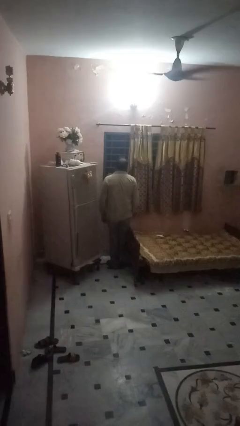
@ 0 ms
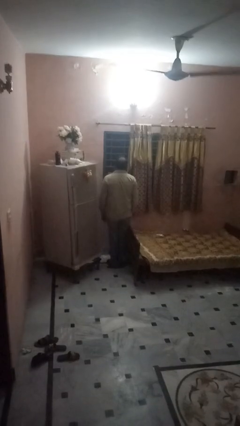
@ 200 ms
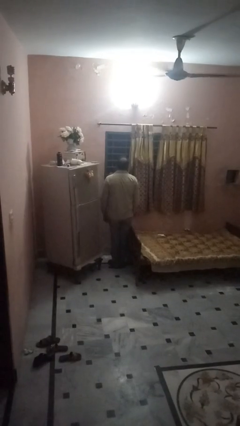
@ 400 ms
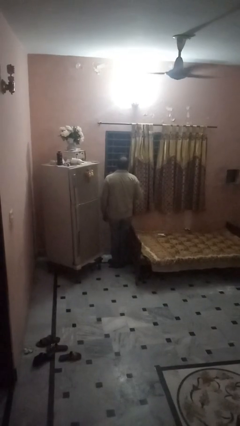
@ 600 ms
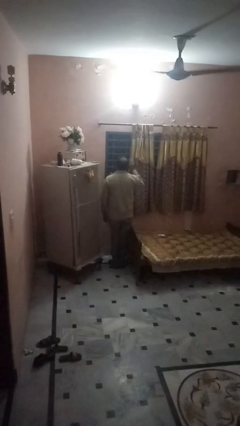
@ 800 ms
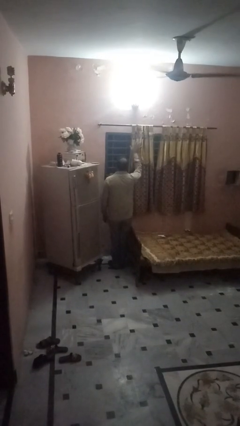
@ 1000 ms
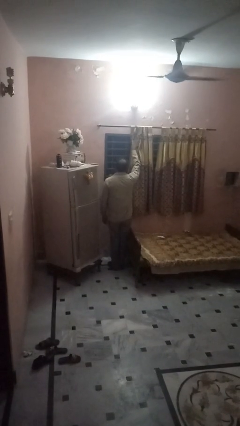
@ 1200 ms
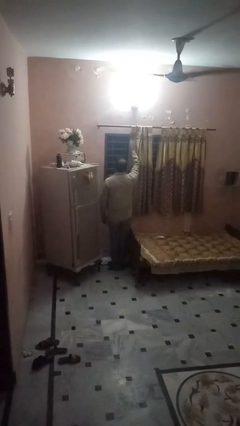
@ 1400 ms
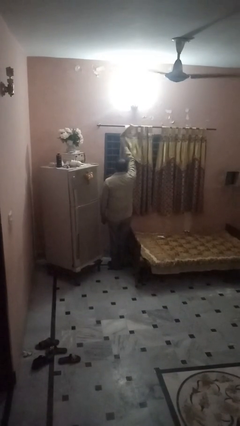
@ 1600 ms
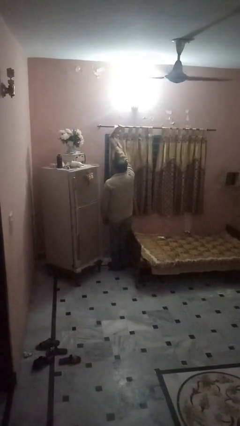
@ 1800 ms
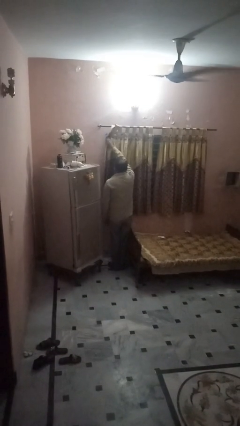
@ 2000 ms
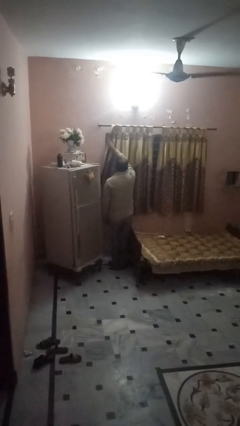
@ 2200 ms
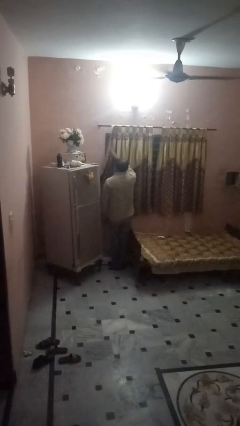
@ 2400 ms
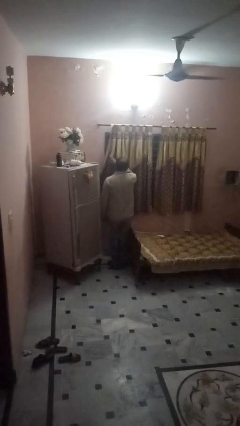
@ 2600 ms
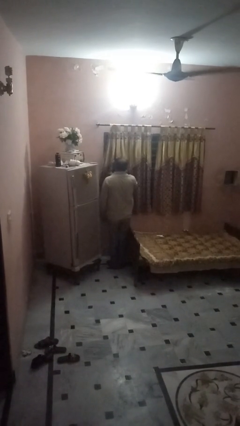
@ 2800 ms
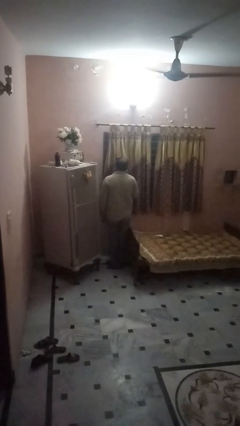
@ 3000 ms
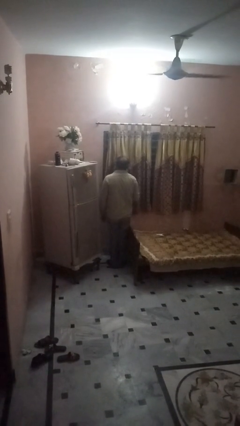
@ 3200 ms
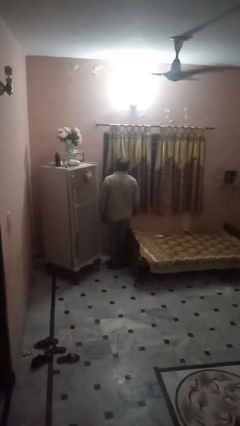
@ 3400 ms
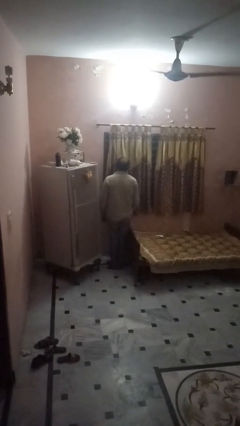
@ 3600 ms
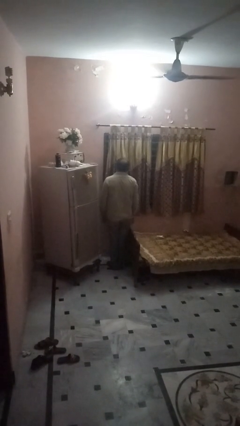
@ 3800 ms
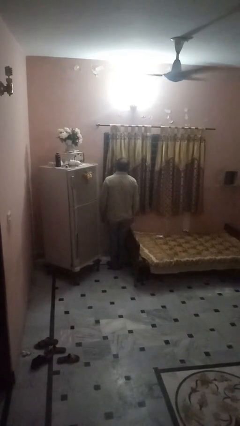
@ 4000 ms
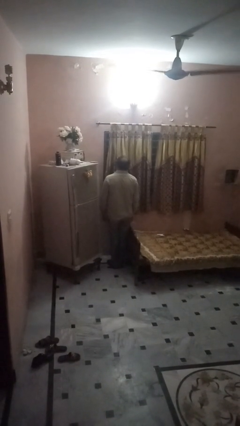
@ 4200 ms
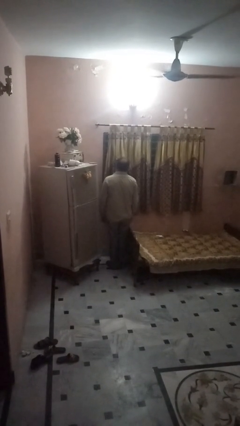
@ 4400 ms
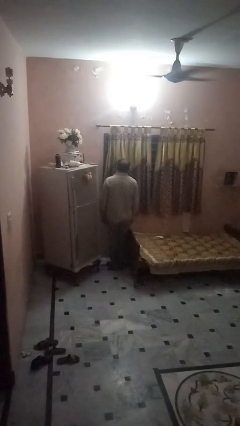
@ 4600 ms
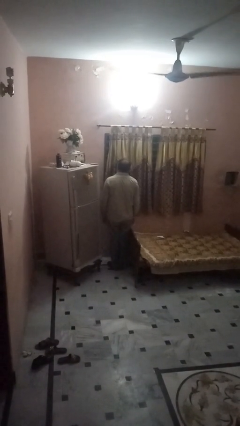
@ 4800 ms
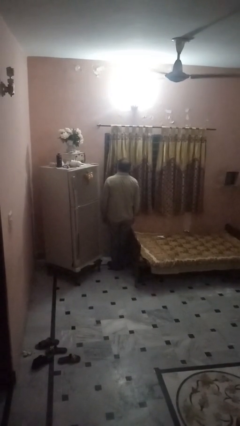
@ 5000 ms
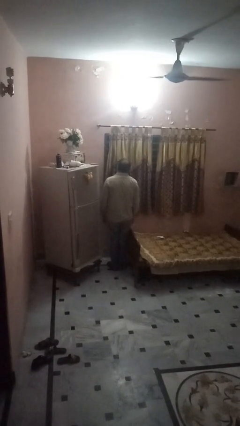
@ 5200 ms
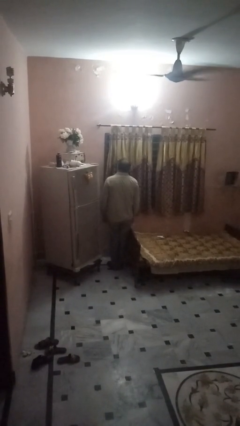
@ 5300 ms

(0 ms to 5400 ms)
person closes curtains

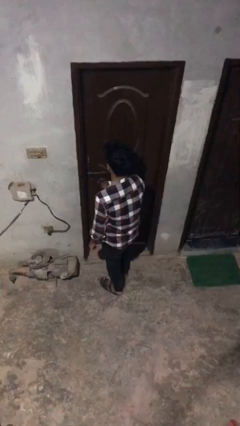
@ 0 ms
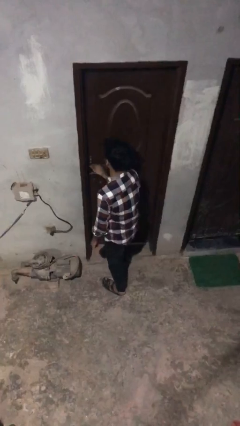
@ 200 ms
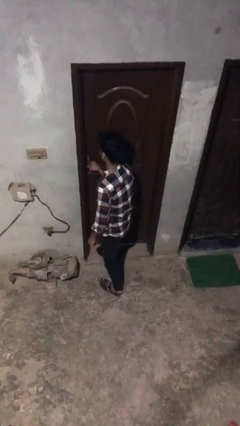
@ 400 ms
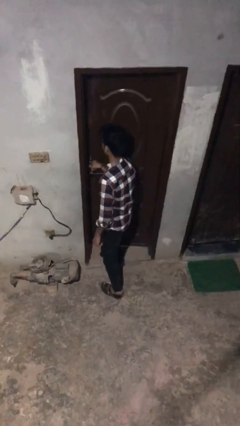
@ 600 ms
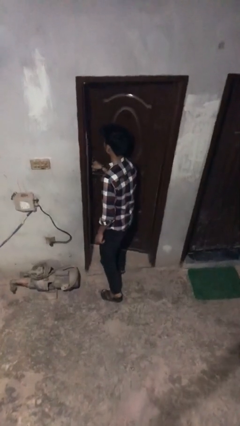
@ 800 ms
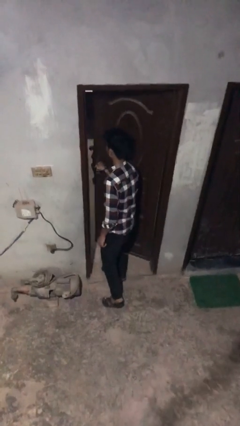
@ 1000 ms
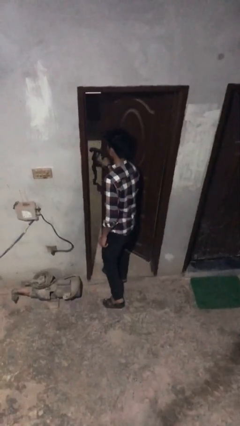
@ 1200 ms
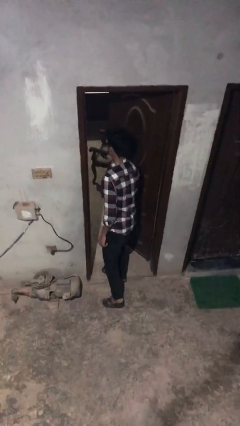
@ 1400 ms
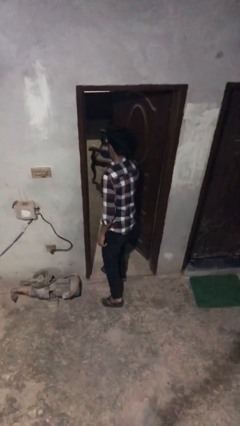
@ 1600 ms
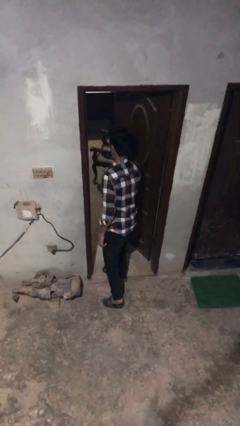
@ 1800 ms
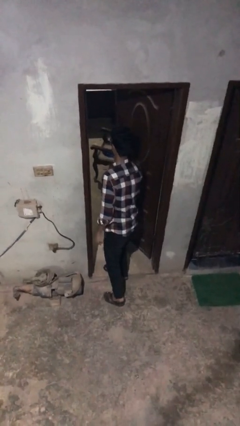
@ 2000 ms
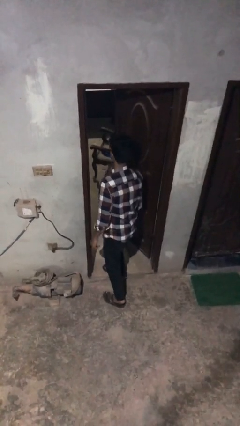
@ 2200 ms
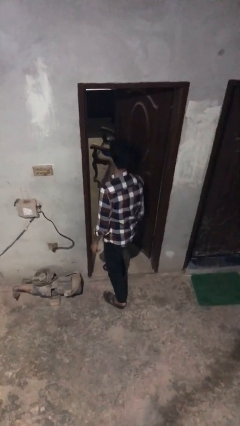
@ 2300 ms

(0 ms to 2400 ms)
person opens facility door

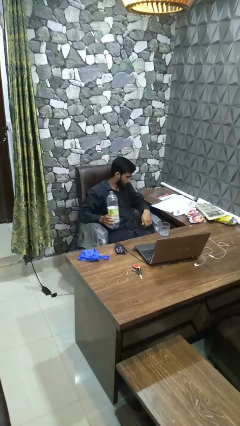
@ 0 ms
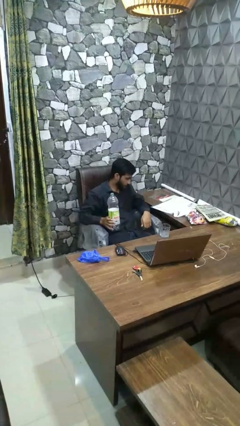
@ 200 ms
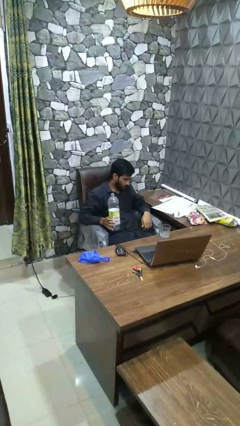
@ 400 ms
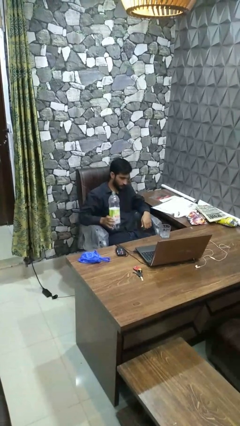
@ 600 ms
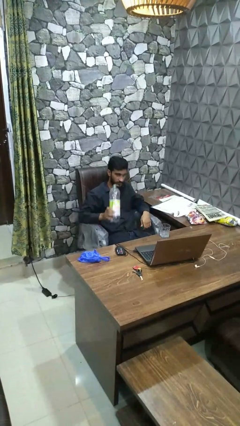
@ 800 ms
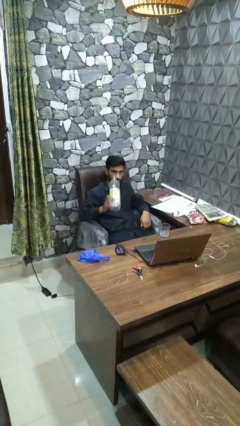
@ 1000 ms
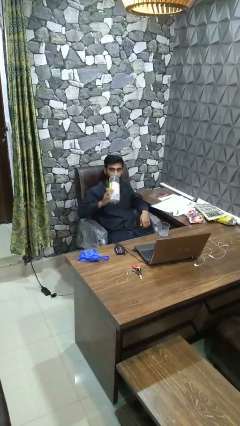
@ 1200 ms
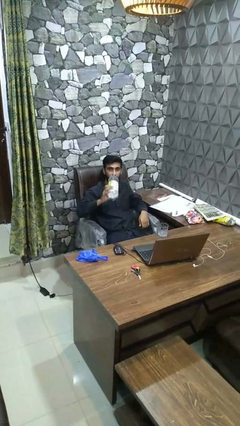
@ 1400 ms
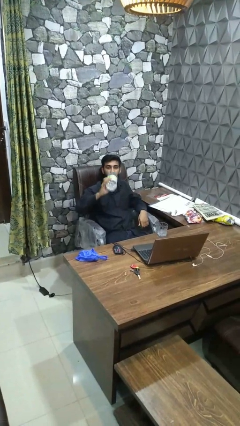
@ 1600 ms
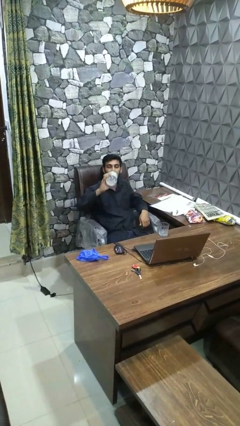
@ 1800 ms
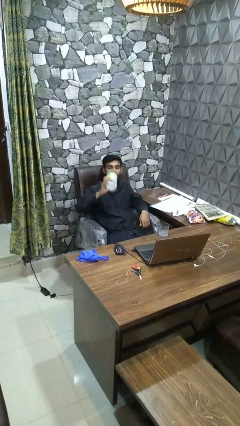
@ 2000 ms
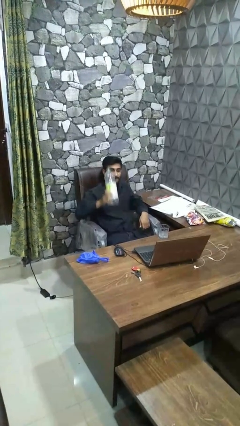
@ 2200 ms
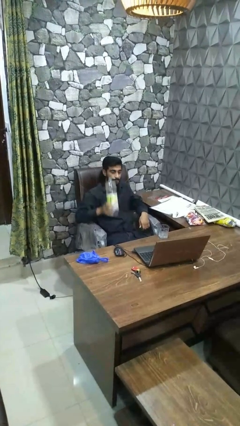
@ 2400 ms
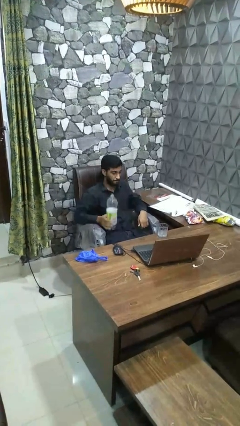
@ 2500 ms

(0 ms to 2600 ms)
person drinks from bottle

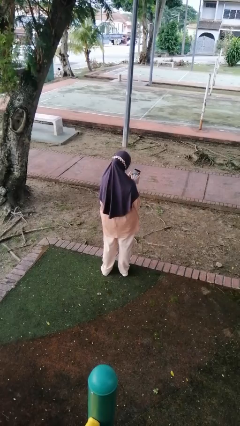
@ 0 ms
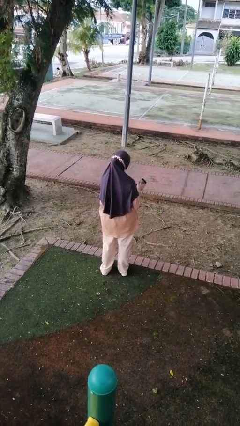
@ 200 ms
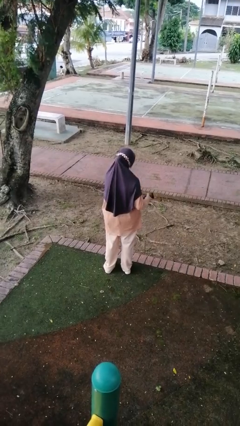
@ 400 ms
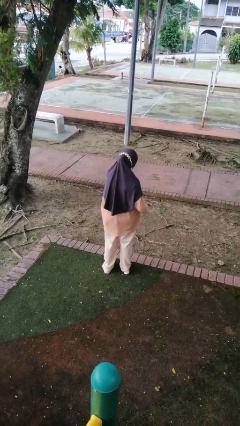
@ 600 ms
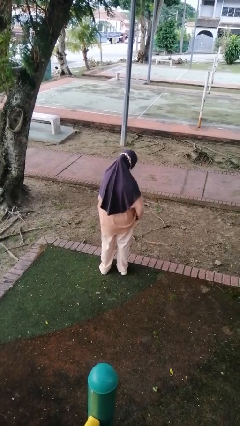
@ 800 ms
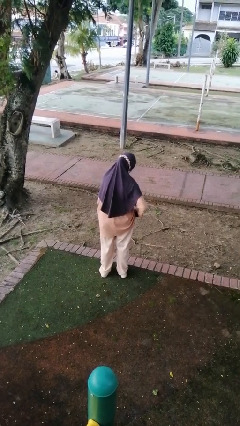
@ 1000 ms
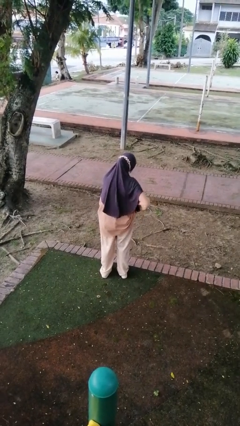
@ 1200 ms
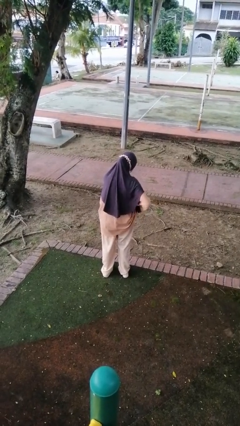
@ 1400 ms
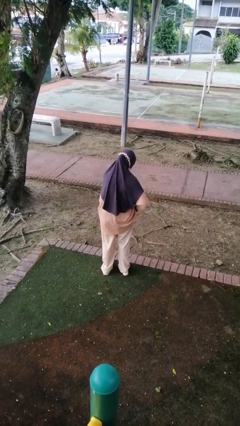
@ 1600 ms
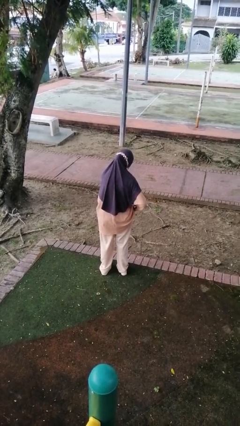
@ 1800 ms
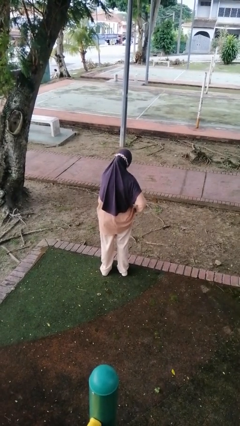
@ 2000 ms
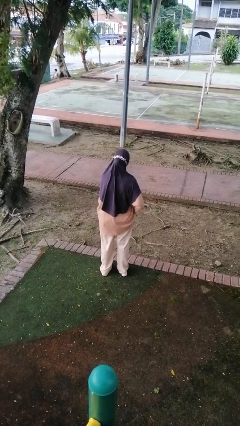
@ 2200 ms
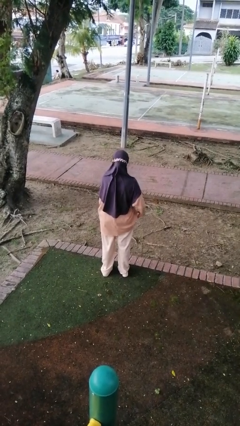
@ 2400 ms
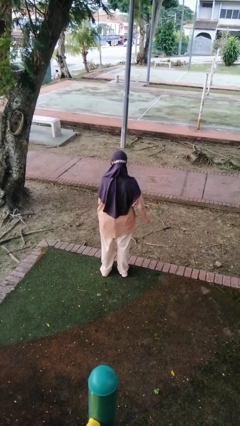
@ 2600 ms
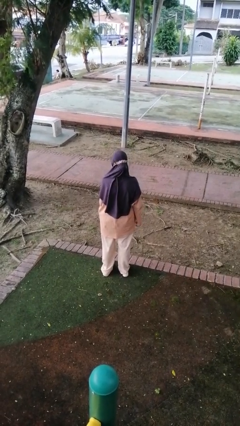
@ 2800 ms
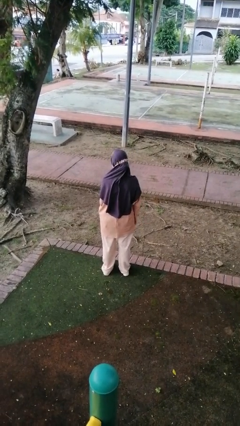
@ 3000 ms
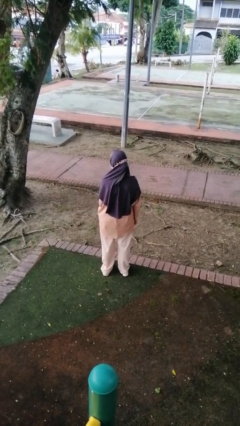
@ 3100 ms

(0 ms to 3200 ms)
person puts phone into pocket

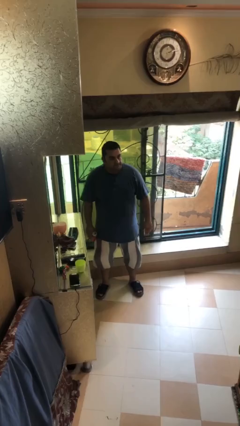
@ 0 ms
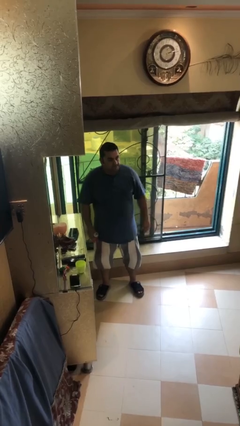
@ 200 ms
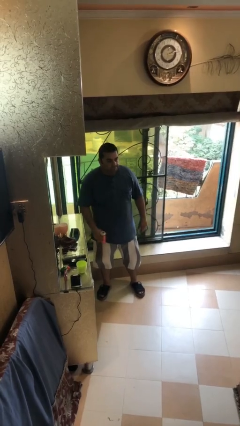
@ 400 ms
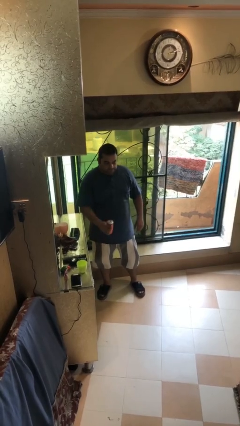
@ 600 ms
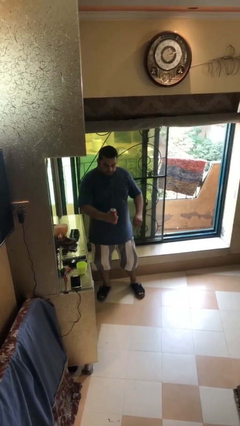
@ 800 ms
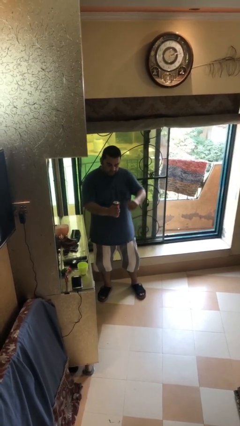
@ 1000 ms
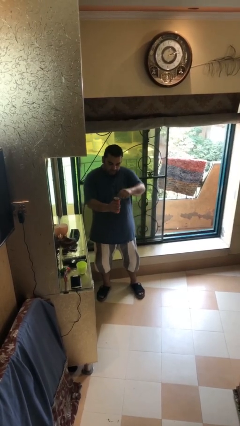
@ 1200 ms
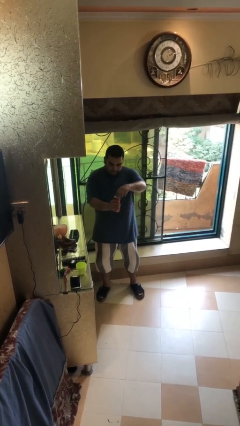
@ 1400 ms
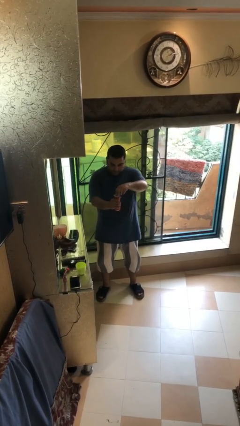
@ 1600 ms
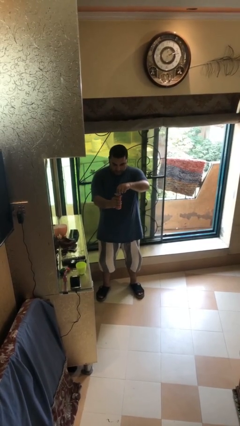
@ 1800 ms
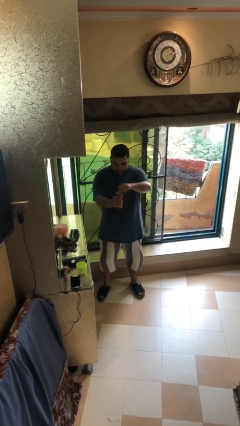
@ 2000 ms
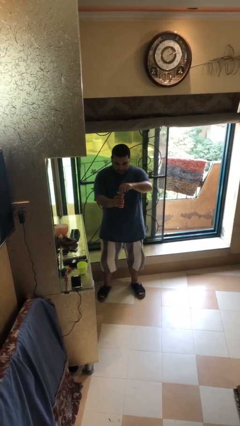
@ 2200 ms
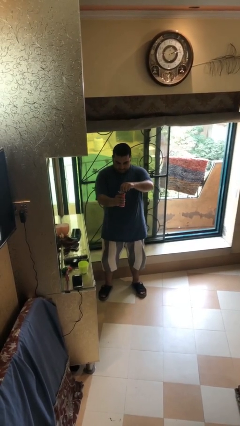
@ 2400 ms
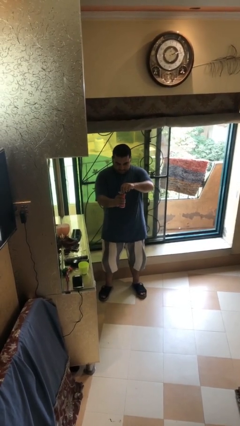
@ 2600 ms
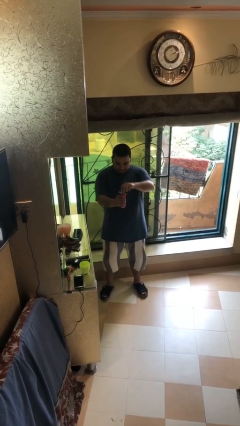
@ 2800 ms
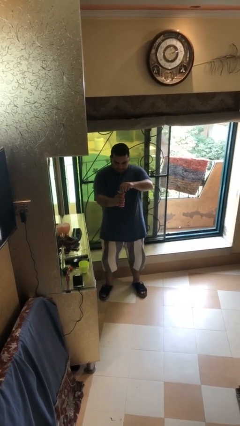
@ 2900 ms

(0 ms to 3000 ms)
person opens beverage can

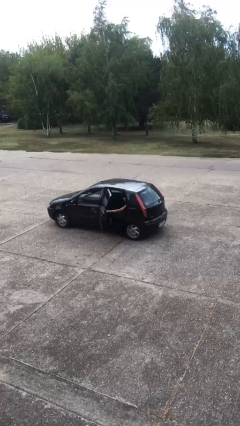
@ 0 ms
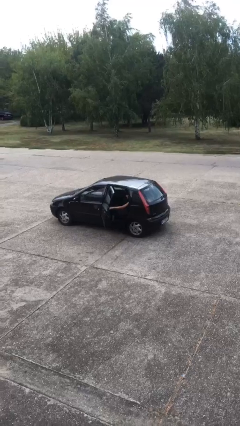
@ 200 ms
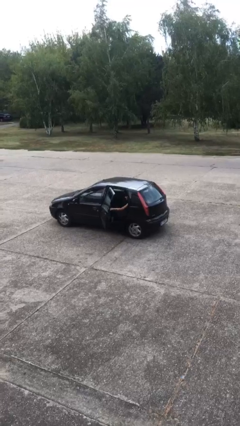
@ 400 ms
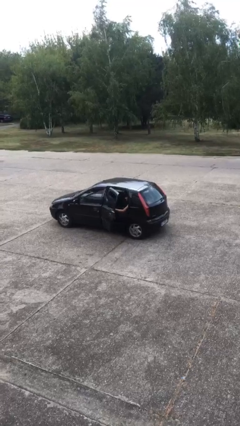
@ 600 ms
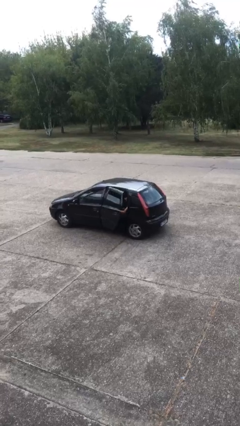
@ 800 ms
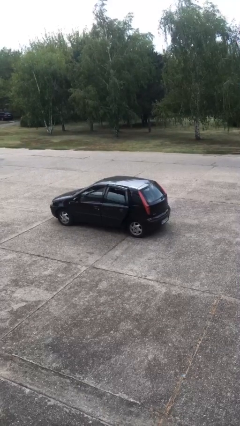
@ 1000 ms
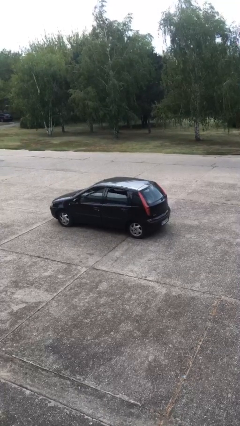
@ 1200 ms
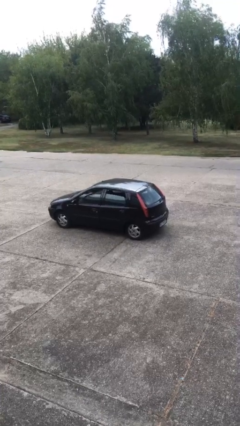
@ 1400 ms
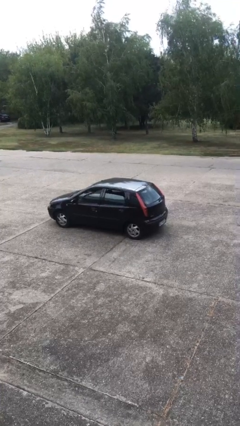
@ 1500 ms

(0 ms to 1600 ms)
person closes car door
